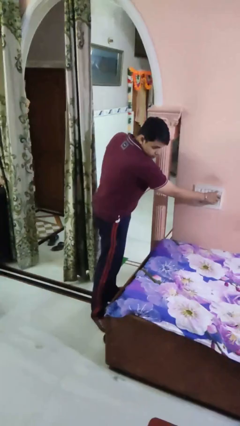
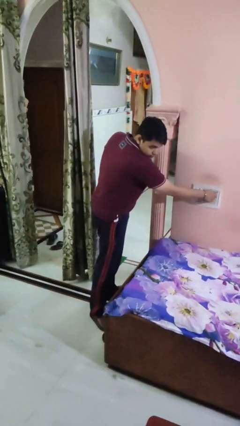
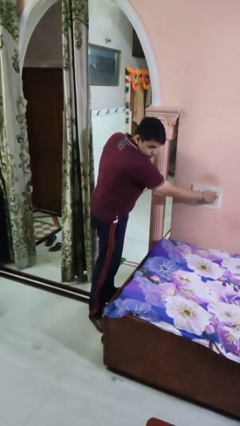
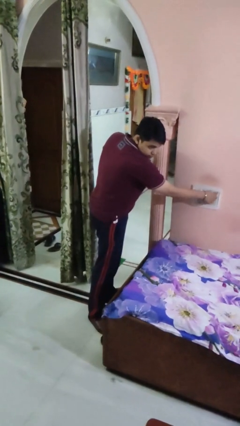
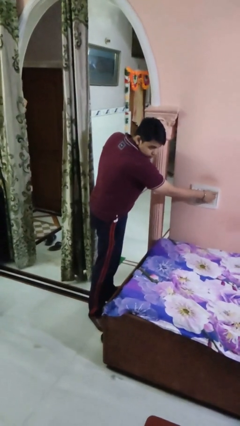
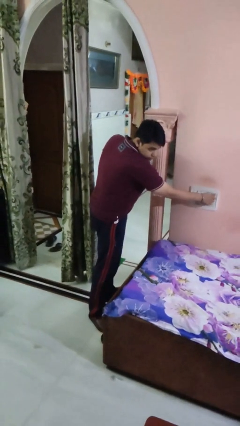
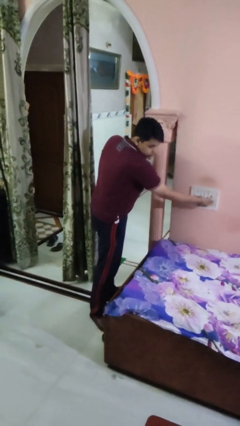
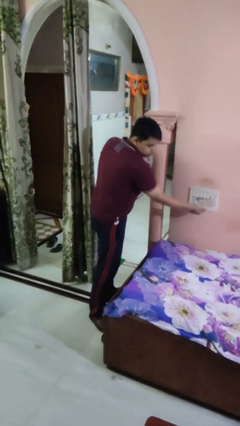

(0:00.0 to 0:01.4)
person adjusts thermostat

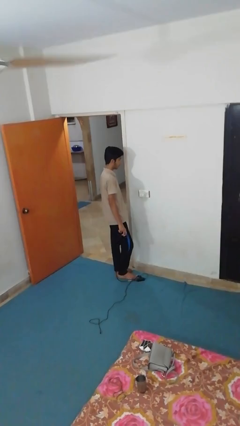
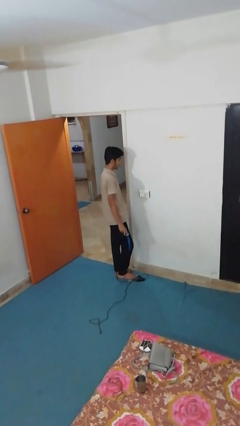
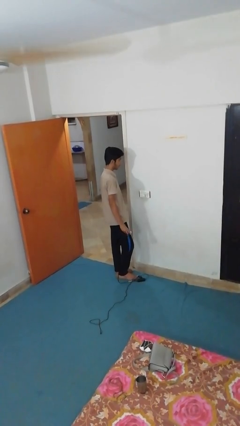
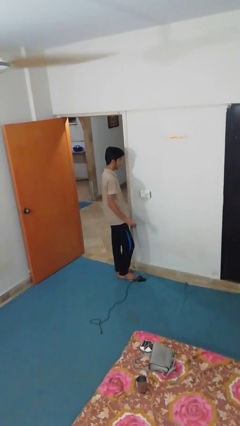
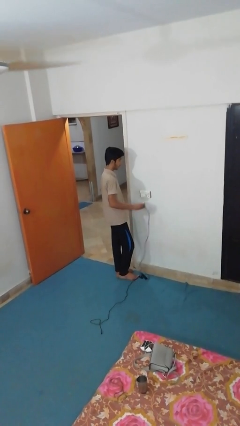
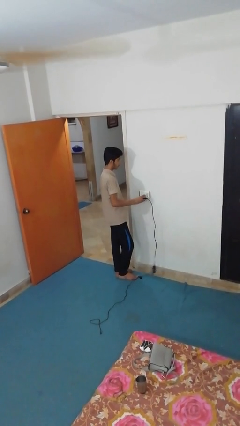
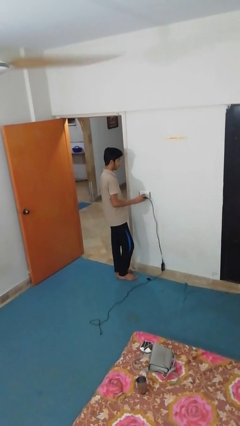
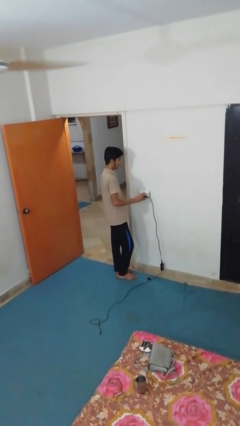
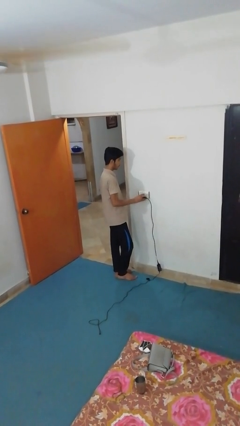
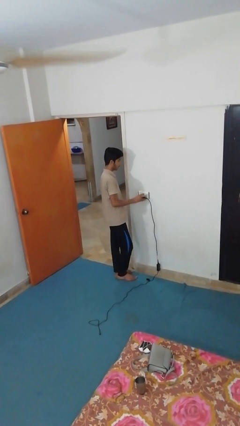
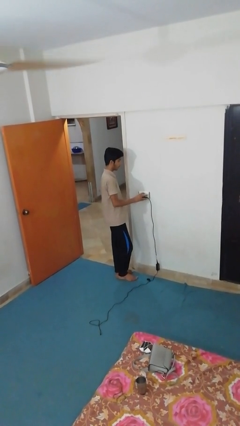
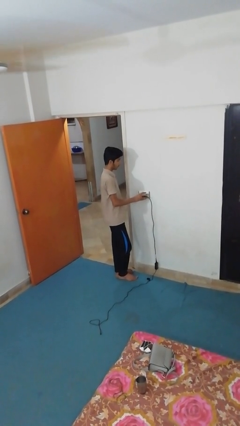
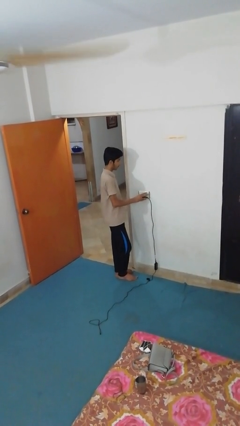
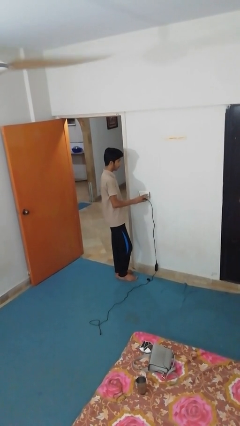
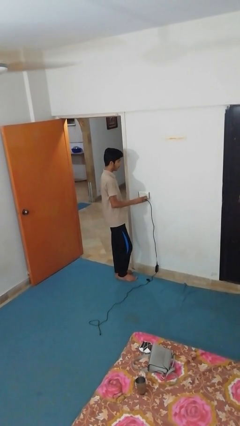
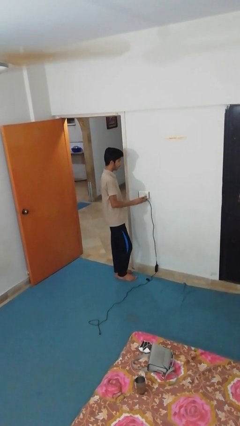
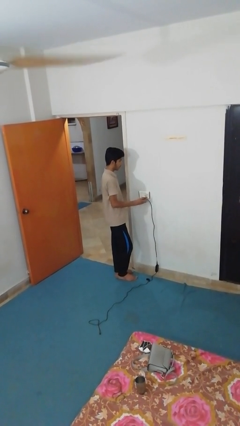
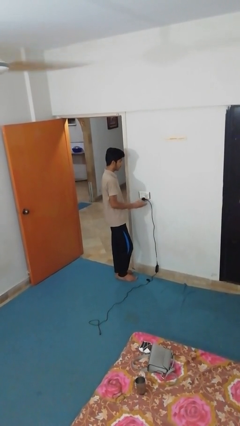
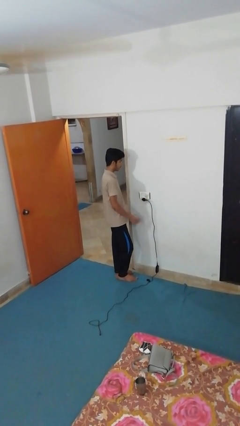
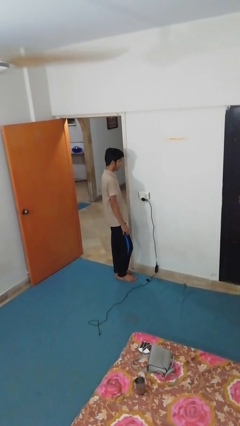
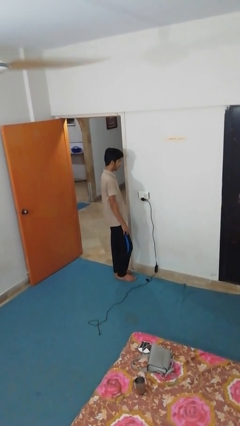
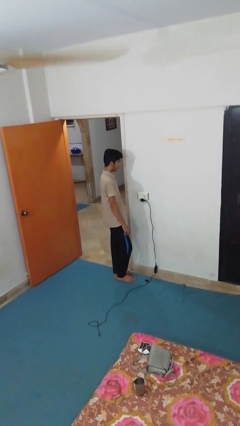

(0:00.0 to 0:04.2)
person plugs into electrical socket

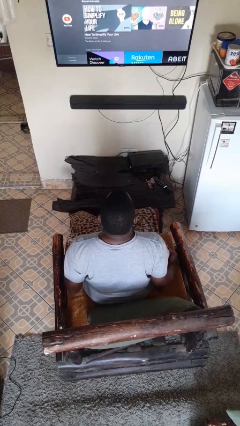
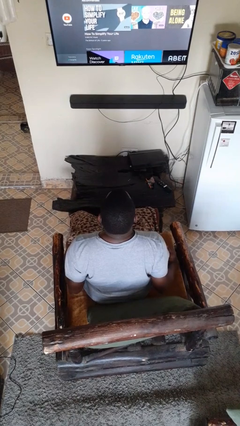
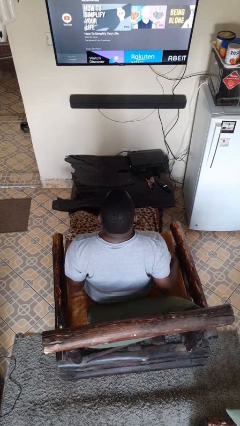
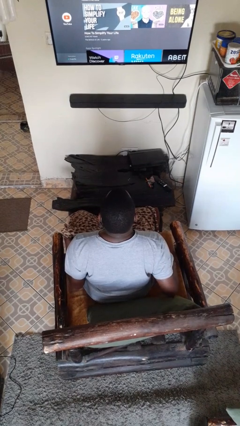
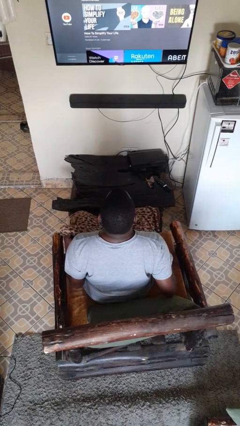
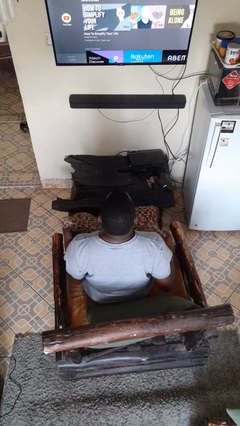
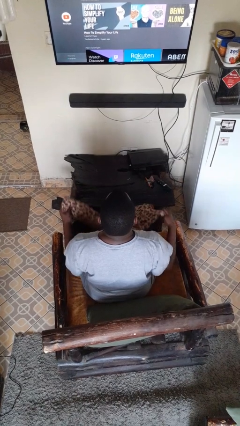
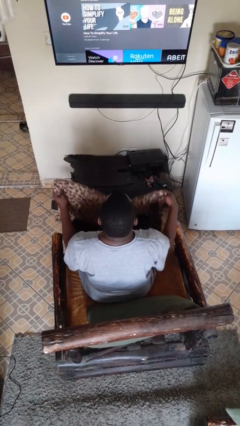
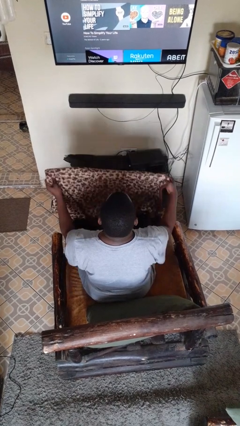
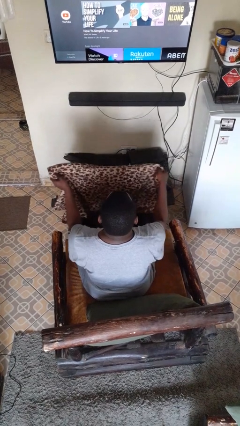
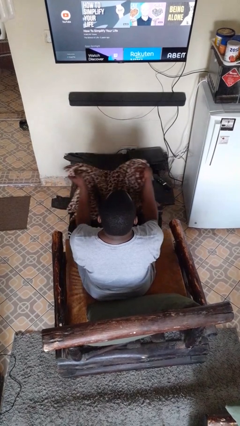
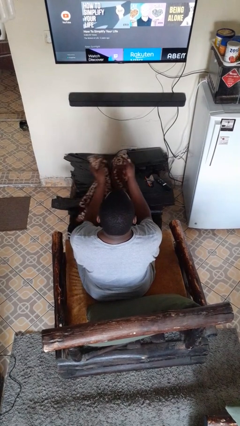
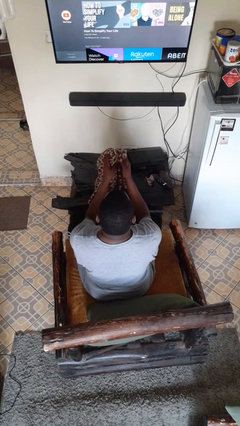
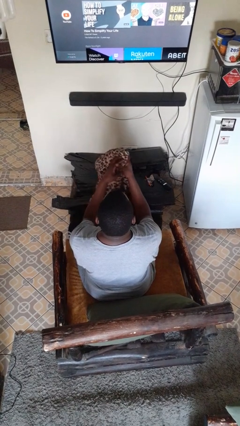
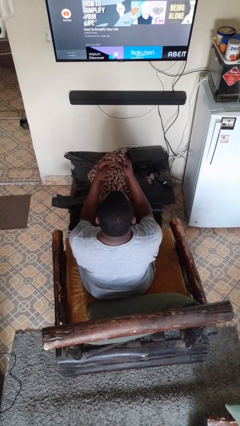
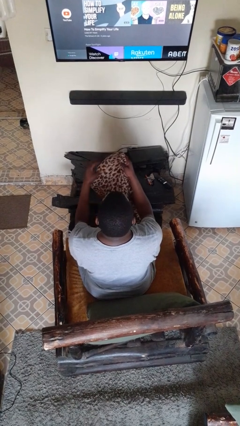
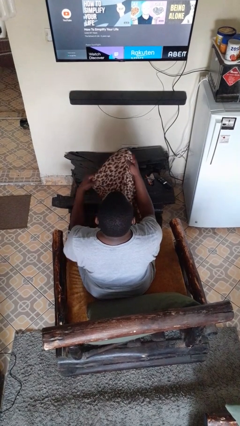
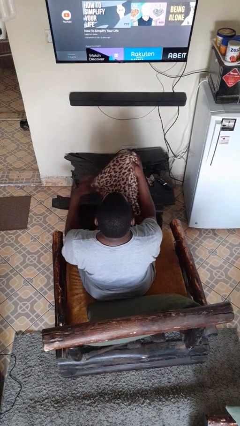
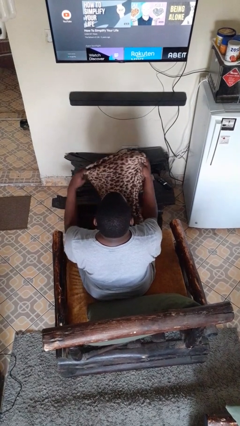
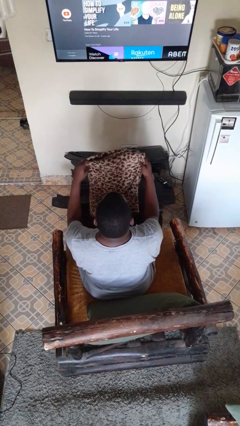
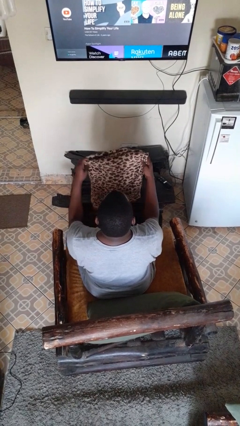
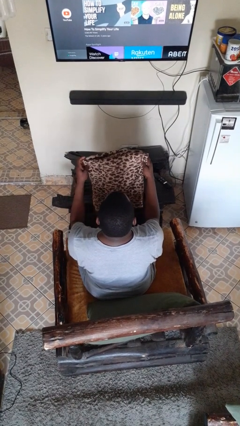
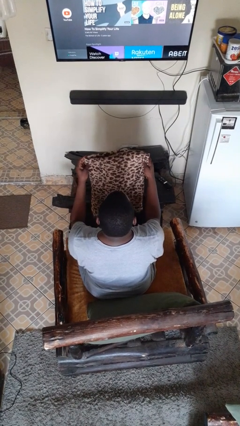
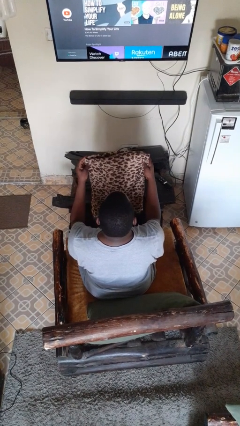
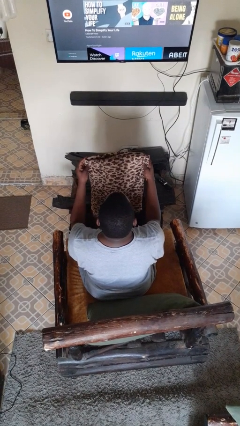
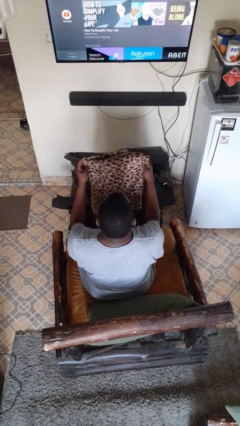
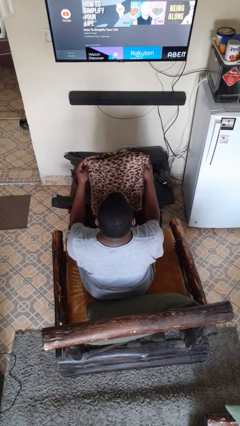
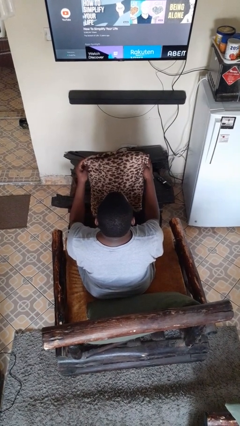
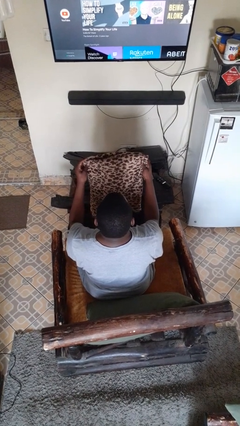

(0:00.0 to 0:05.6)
person folds blanket

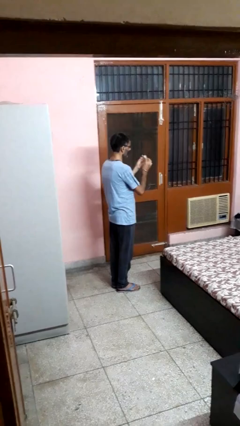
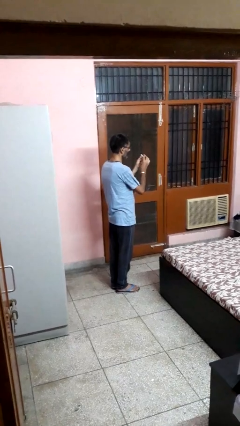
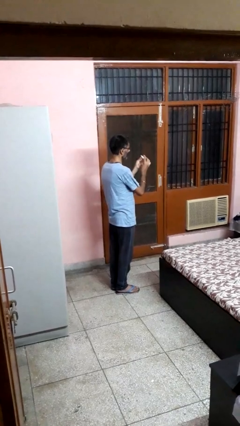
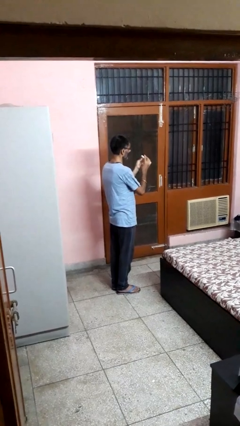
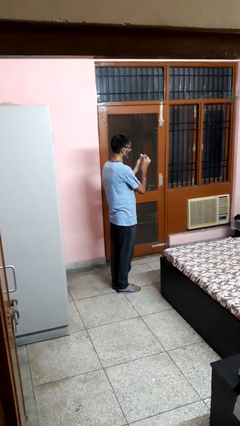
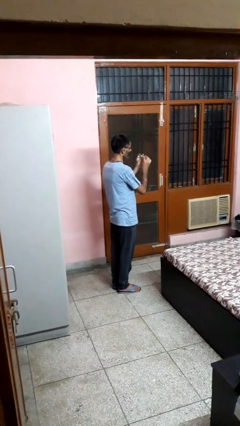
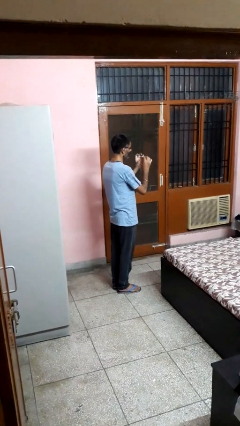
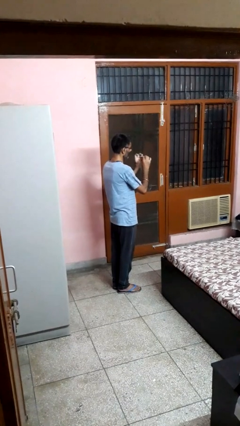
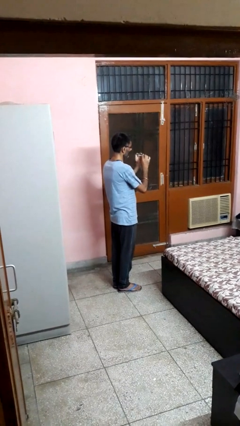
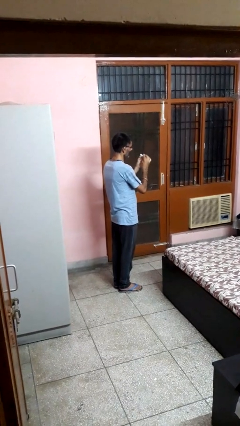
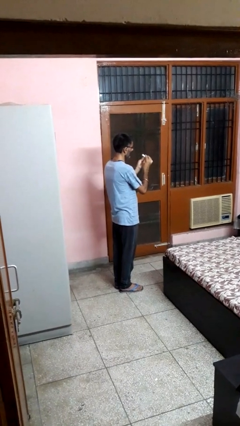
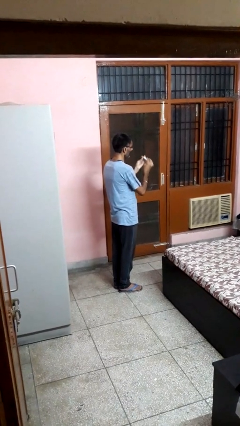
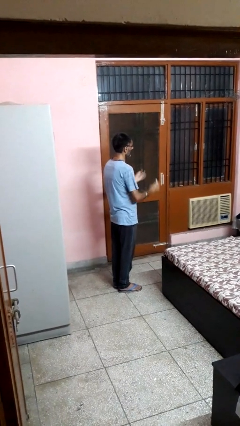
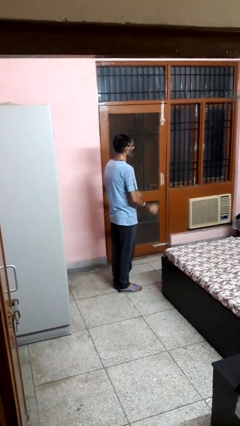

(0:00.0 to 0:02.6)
person files fingernails

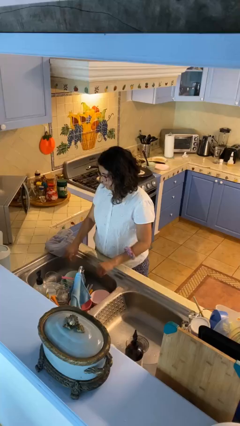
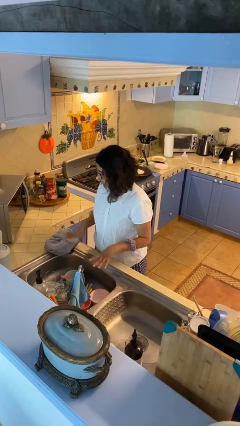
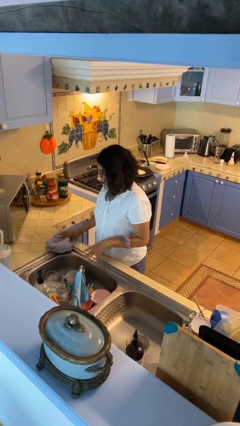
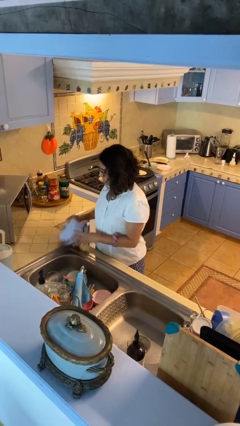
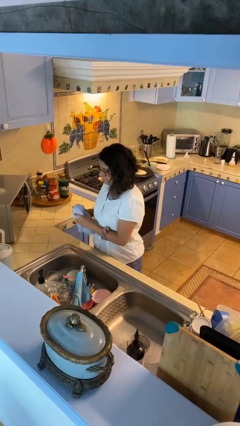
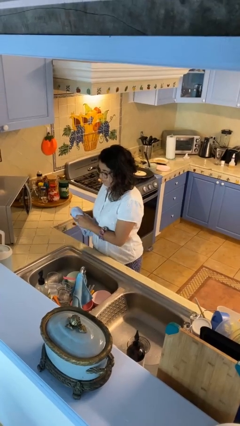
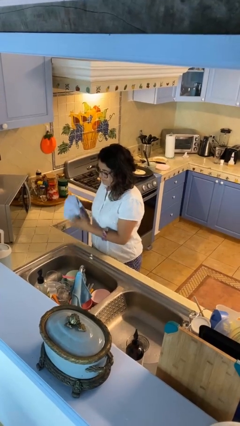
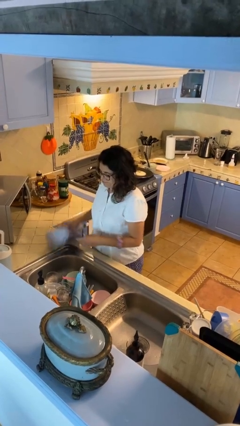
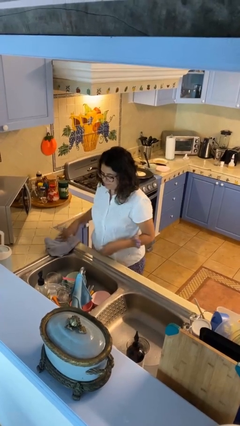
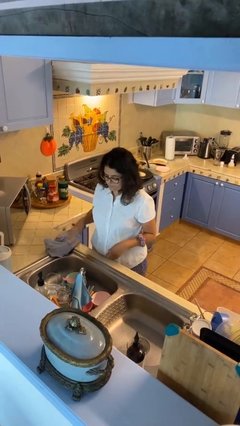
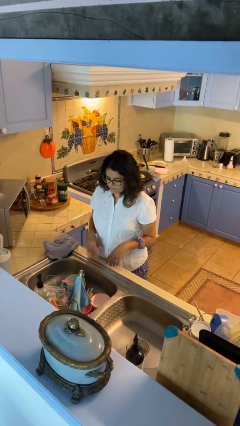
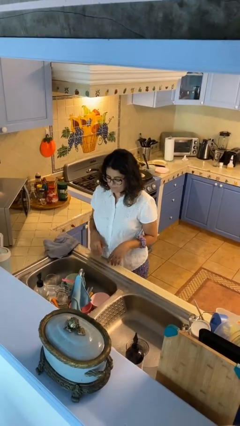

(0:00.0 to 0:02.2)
person dries hands with towel

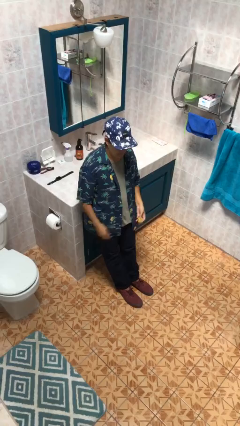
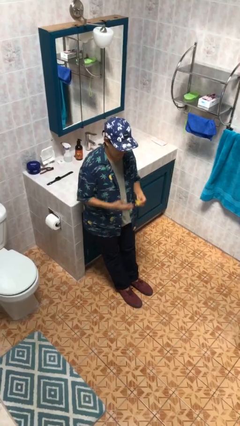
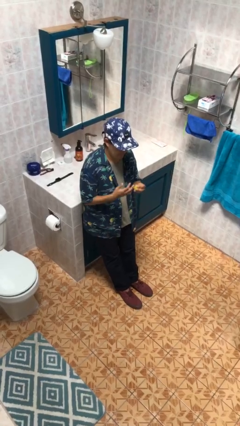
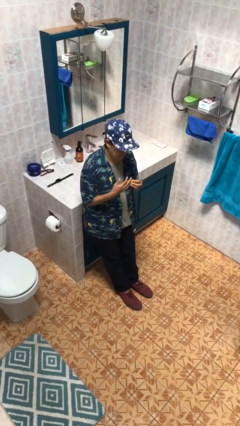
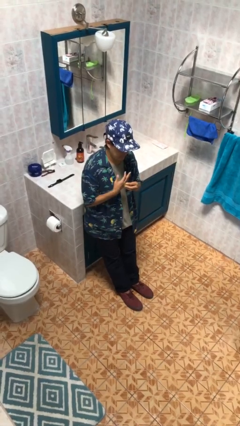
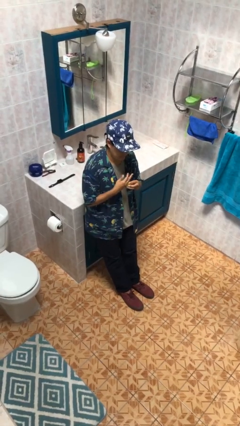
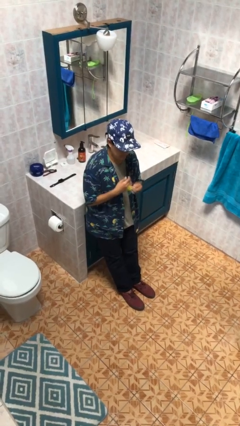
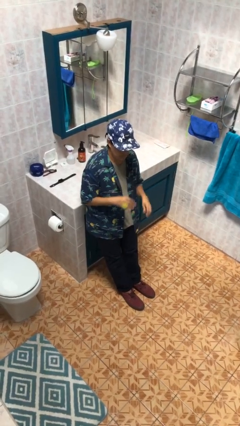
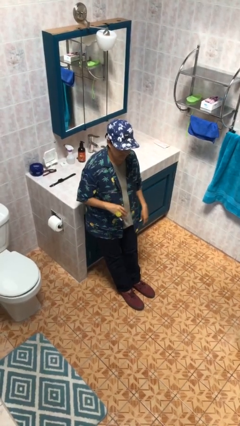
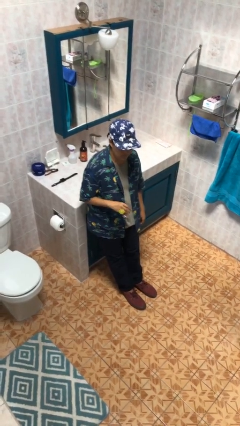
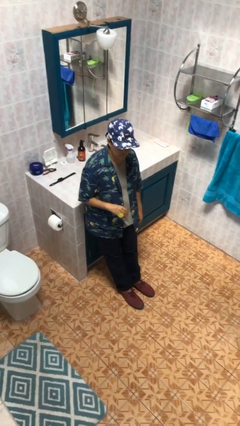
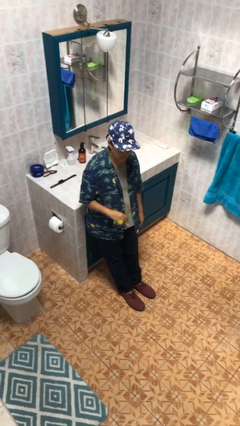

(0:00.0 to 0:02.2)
person puts on ring
